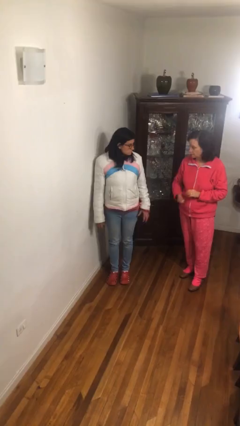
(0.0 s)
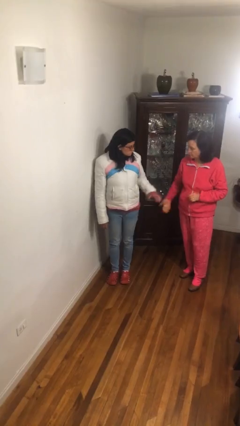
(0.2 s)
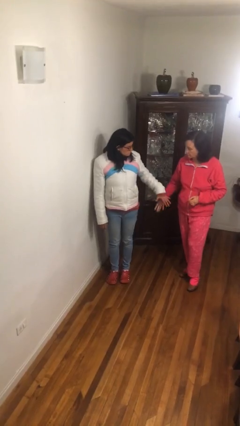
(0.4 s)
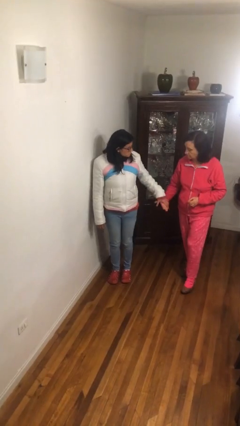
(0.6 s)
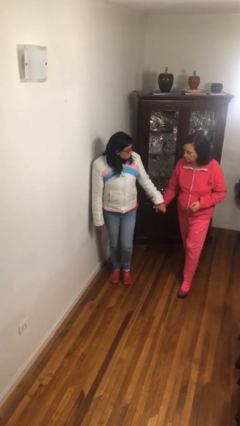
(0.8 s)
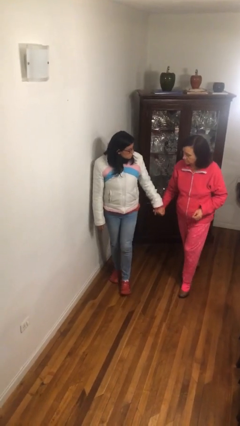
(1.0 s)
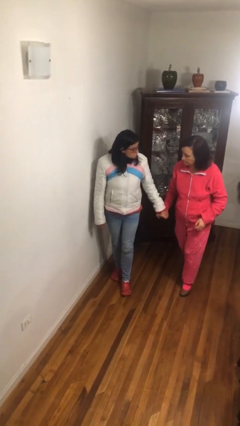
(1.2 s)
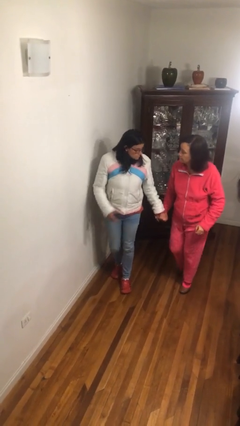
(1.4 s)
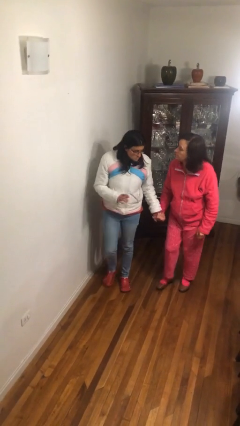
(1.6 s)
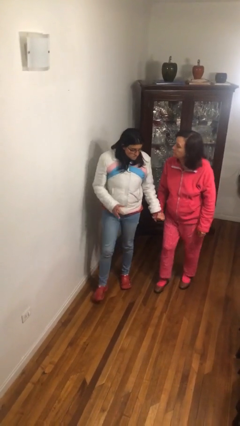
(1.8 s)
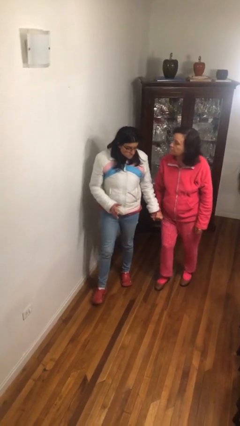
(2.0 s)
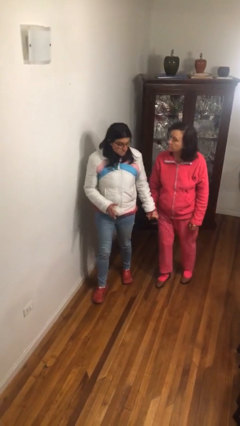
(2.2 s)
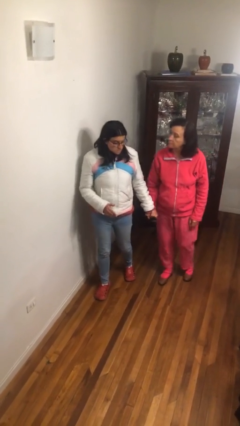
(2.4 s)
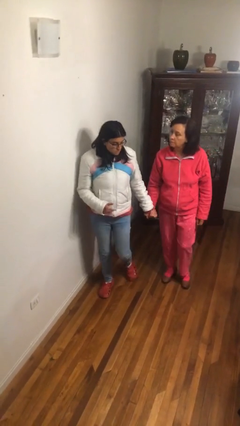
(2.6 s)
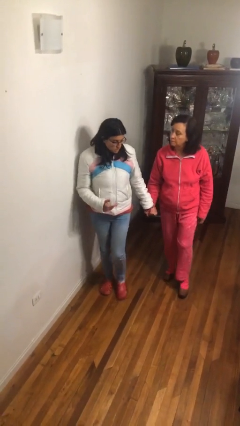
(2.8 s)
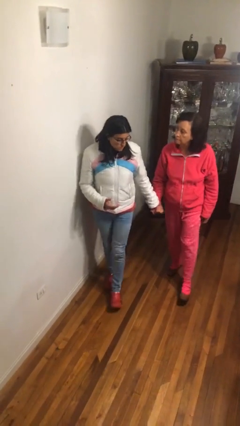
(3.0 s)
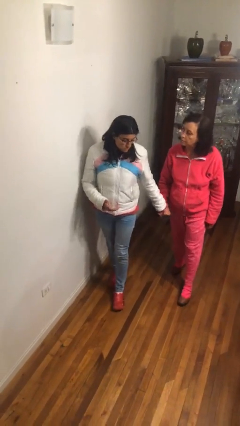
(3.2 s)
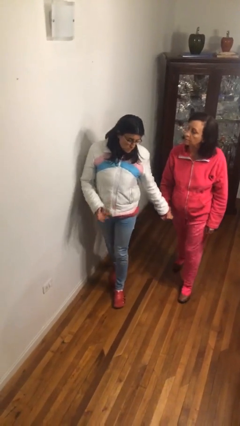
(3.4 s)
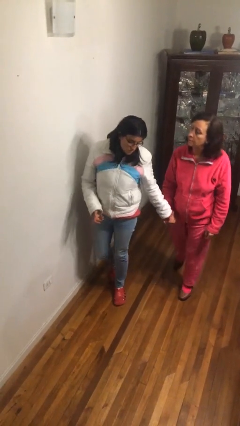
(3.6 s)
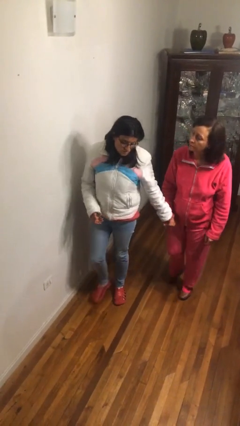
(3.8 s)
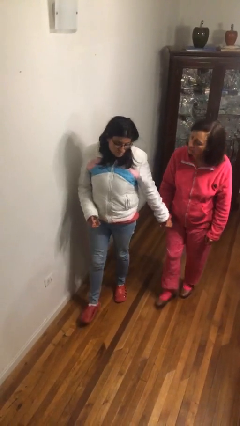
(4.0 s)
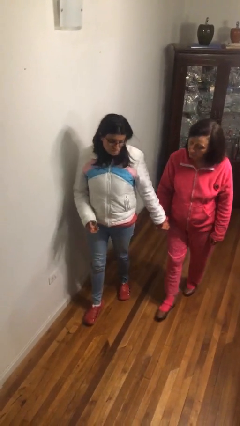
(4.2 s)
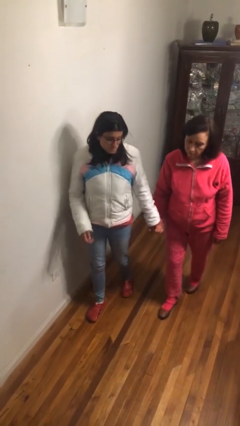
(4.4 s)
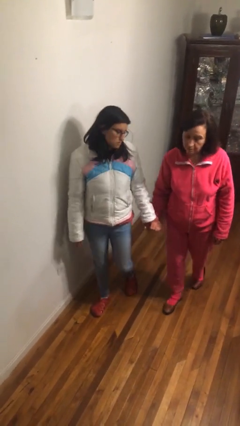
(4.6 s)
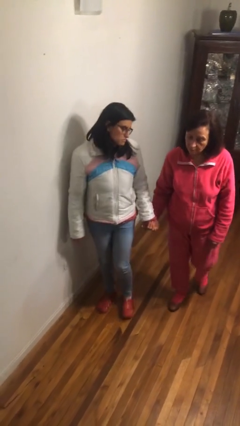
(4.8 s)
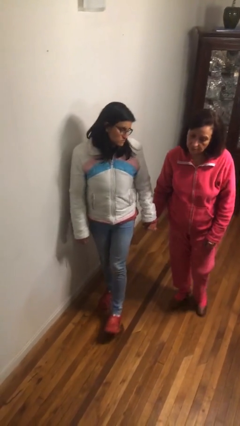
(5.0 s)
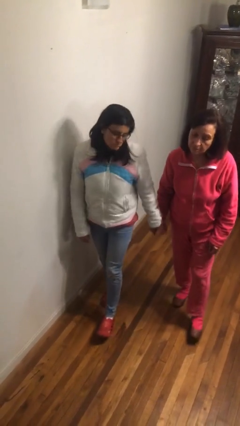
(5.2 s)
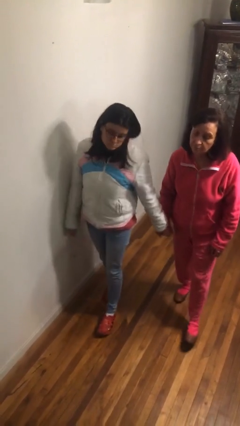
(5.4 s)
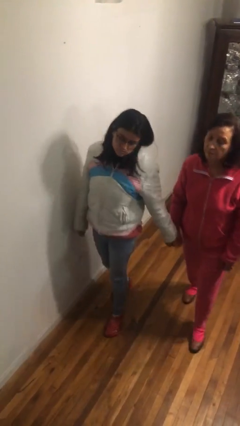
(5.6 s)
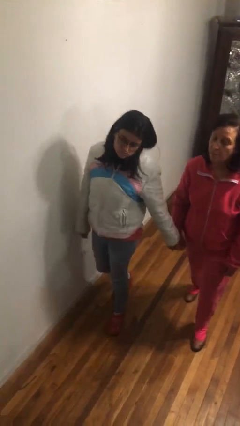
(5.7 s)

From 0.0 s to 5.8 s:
person holds hand

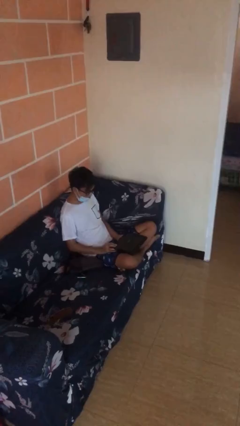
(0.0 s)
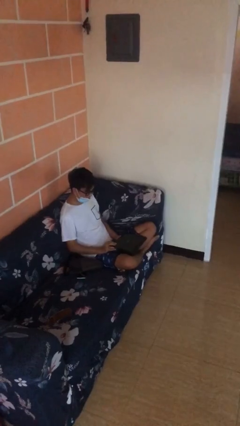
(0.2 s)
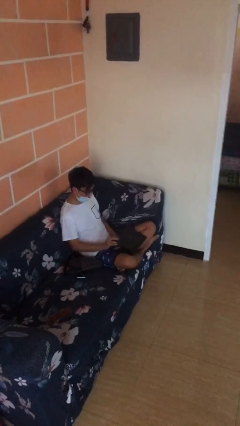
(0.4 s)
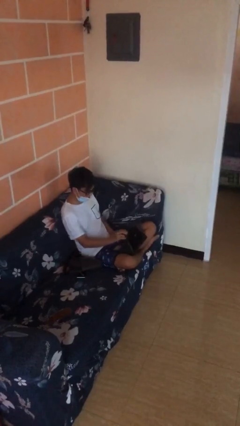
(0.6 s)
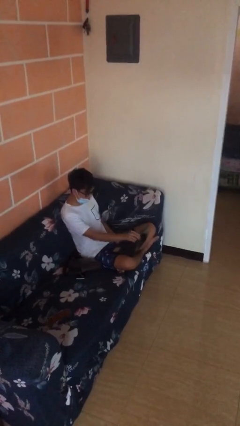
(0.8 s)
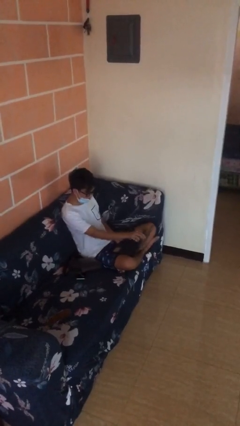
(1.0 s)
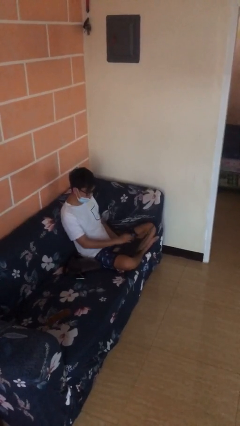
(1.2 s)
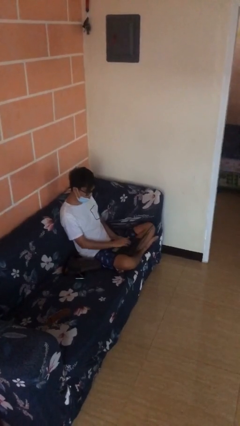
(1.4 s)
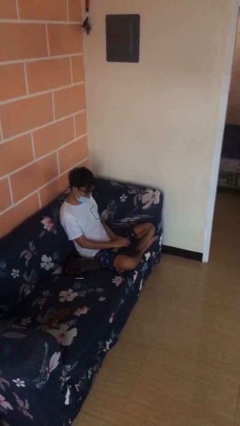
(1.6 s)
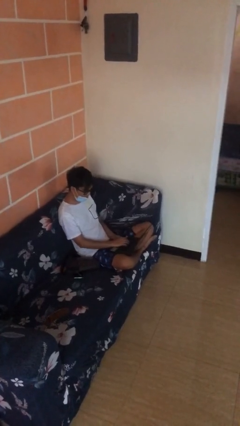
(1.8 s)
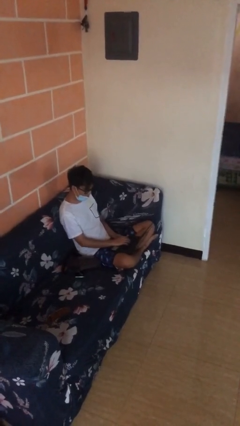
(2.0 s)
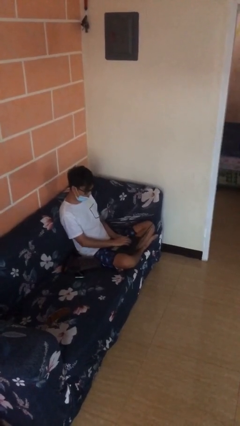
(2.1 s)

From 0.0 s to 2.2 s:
person interacts with laptop

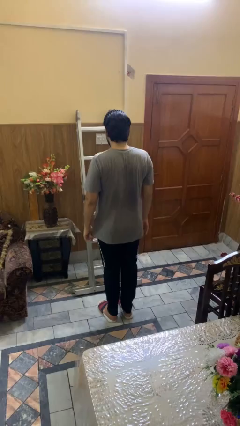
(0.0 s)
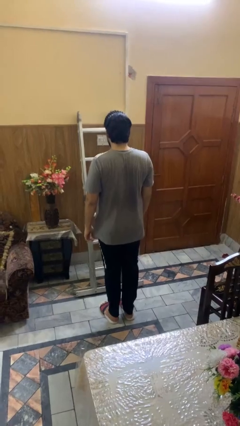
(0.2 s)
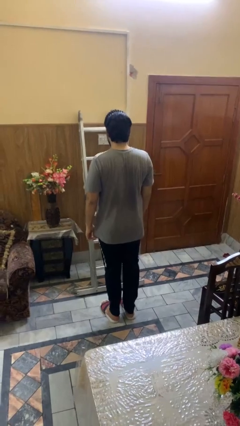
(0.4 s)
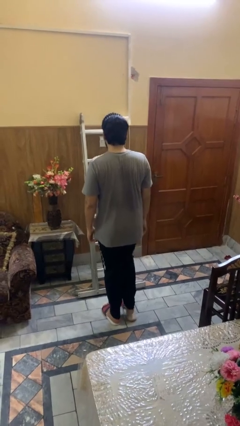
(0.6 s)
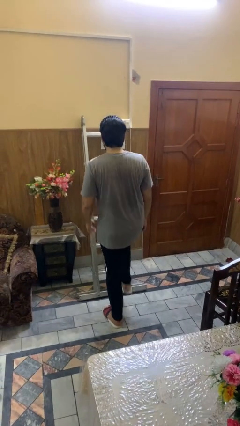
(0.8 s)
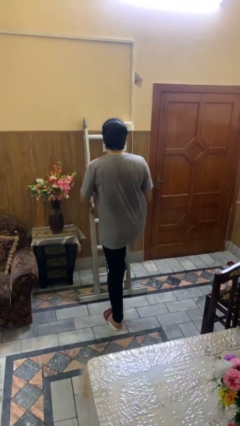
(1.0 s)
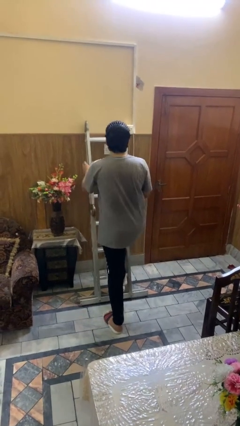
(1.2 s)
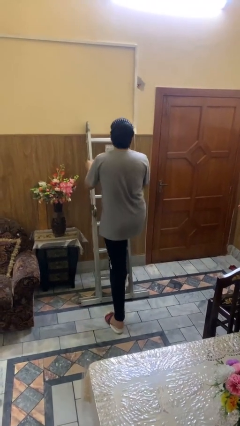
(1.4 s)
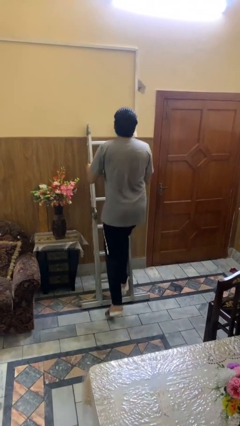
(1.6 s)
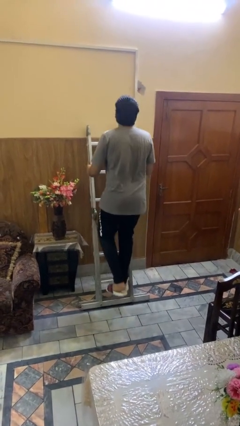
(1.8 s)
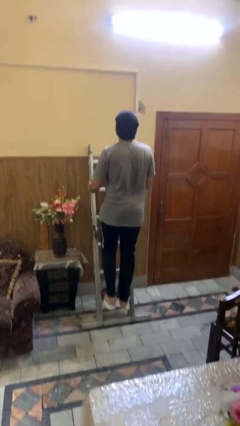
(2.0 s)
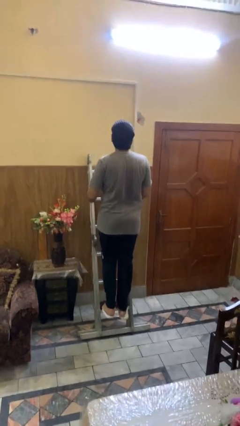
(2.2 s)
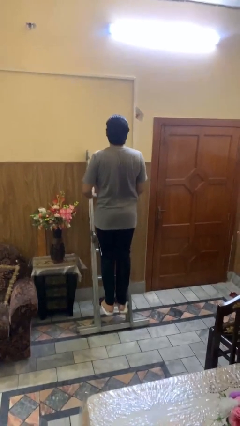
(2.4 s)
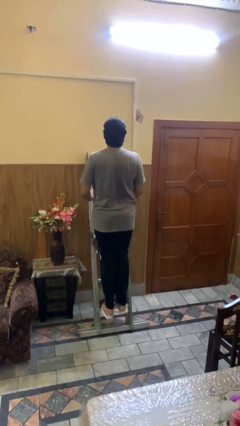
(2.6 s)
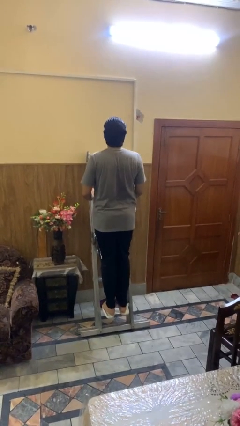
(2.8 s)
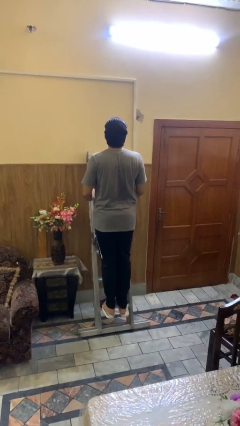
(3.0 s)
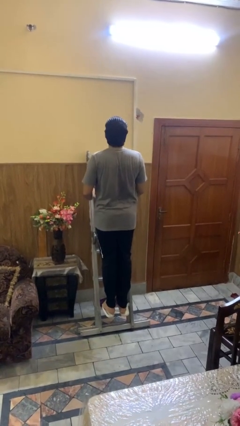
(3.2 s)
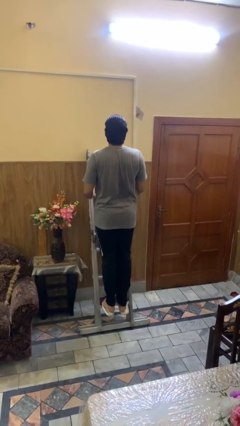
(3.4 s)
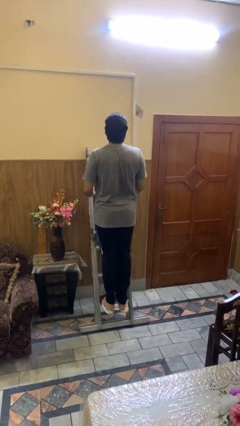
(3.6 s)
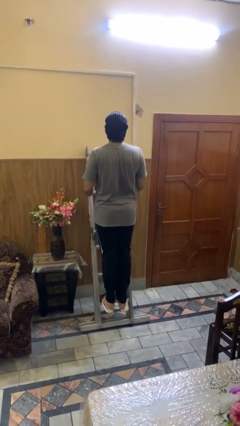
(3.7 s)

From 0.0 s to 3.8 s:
person climbs up ladder

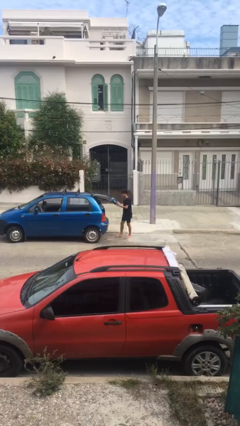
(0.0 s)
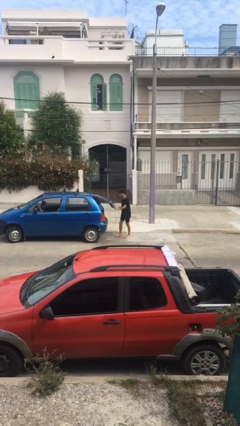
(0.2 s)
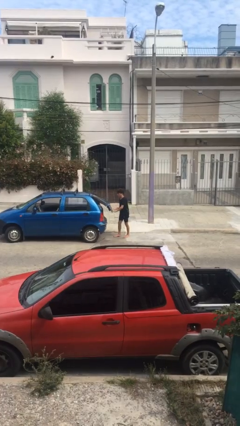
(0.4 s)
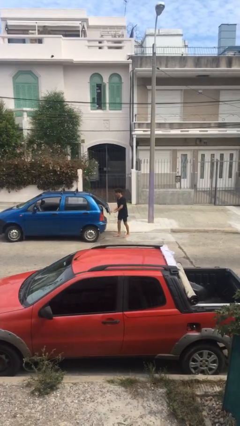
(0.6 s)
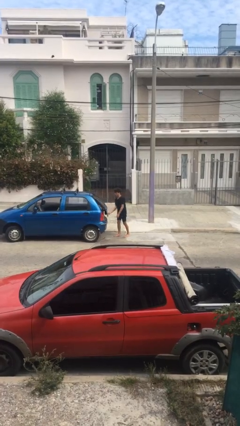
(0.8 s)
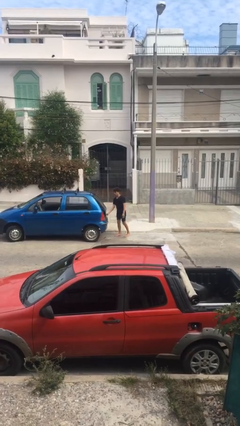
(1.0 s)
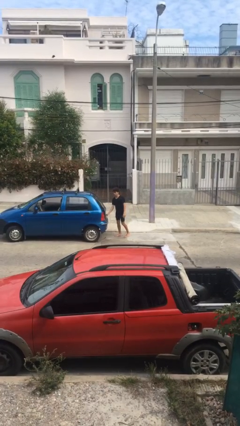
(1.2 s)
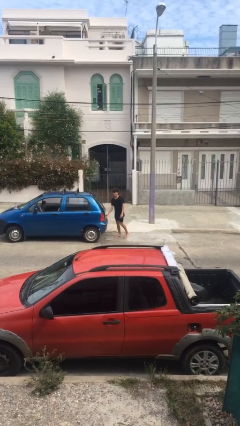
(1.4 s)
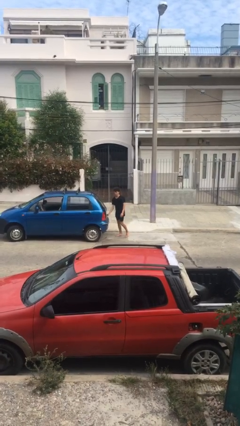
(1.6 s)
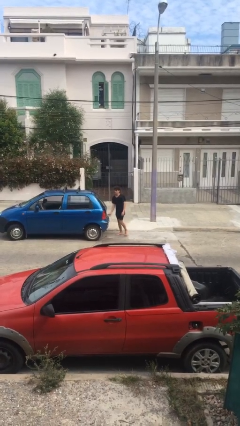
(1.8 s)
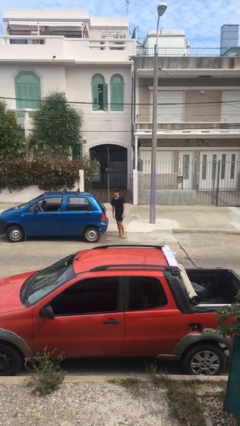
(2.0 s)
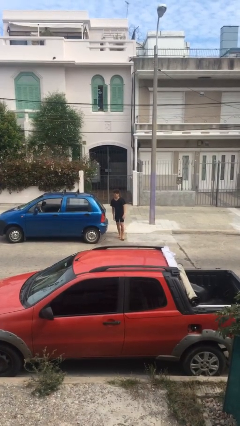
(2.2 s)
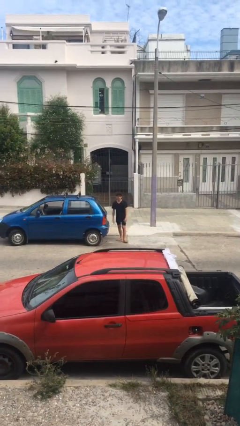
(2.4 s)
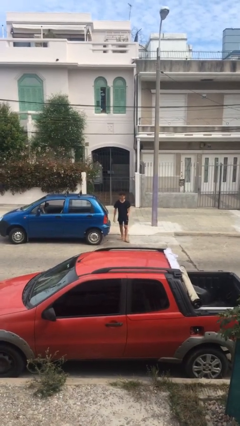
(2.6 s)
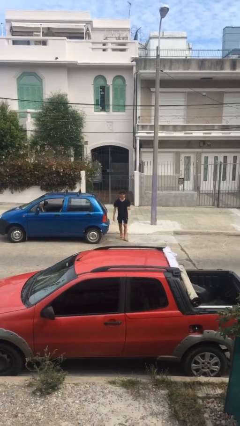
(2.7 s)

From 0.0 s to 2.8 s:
person closes car trunk

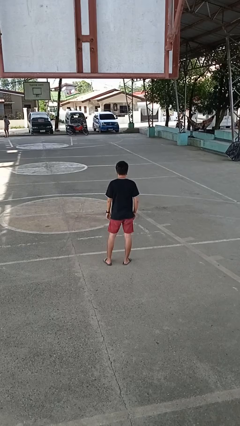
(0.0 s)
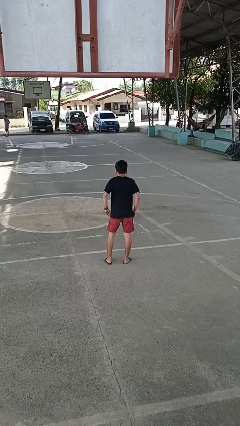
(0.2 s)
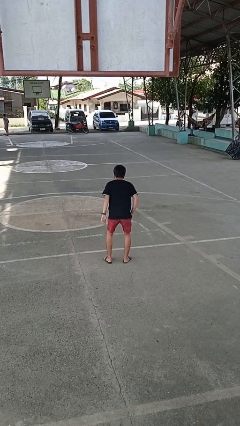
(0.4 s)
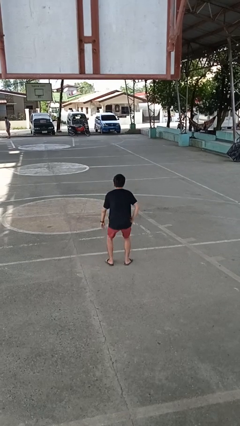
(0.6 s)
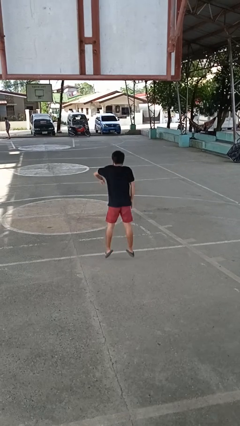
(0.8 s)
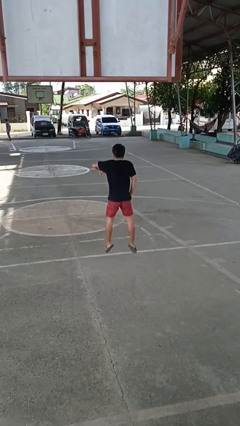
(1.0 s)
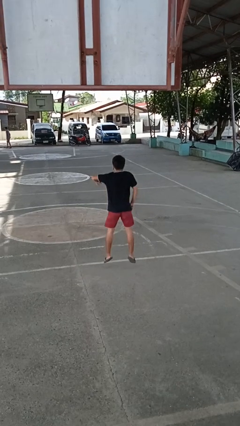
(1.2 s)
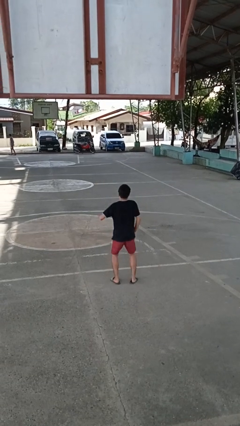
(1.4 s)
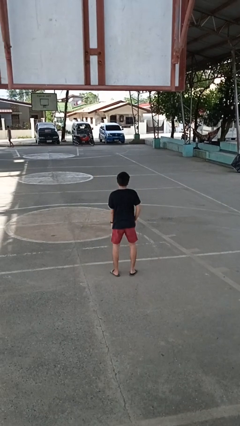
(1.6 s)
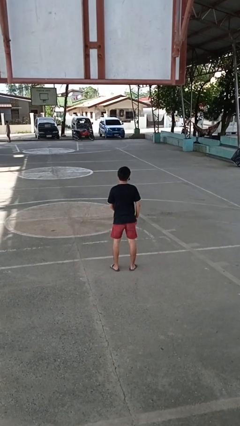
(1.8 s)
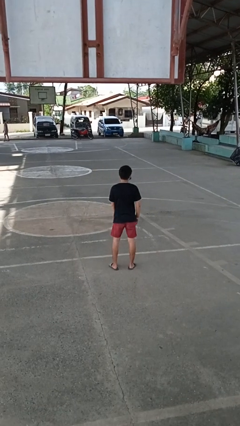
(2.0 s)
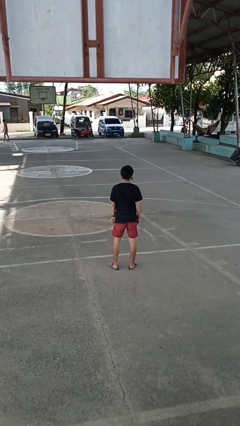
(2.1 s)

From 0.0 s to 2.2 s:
person jumps

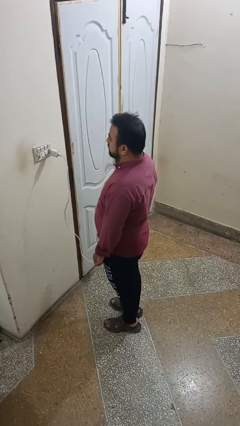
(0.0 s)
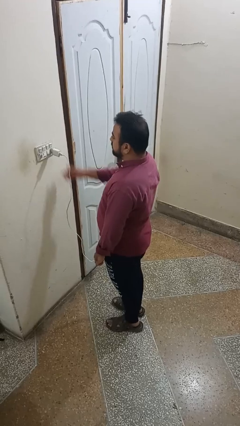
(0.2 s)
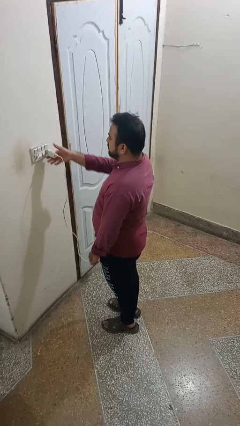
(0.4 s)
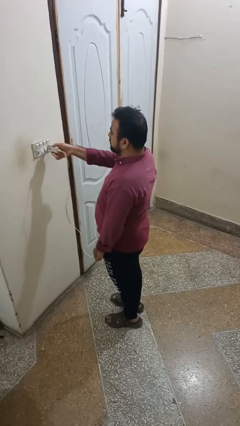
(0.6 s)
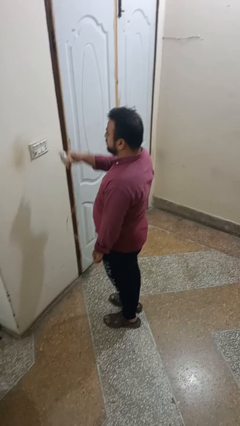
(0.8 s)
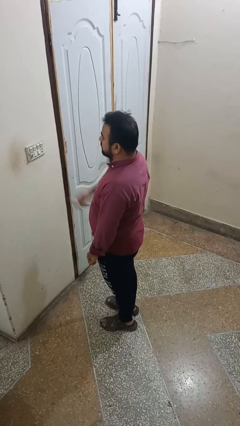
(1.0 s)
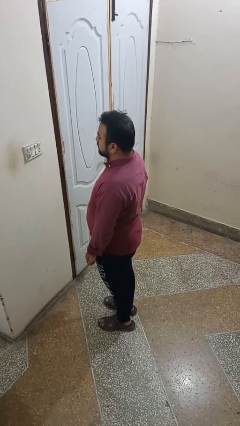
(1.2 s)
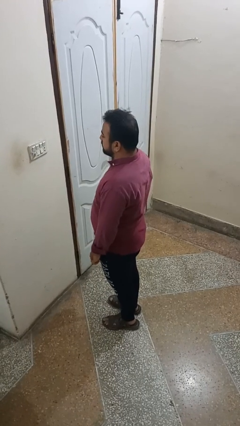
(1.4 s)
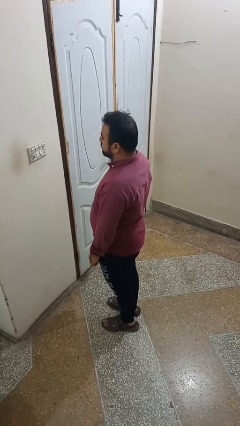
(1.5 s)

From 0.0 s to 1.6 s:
person unplugs from electrical socket
